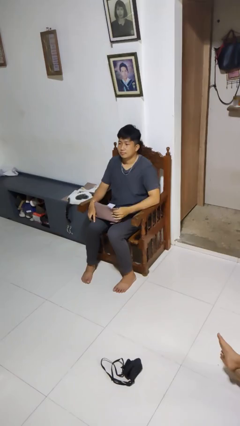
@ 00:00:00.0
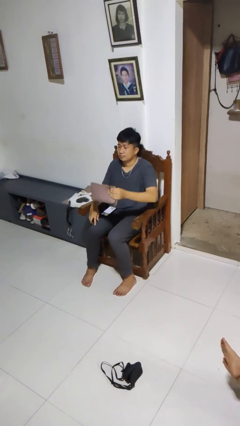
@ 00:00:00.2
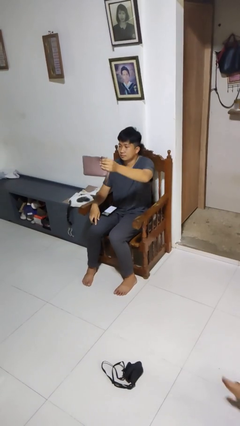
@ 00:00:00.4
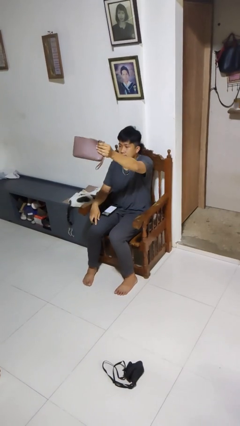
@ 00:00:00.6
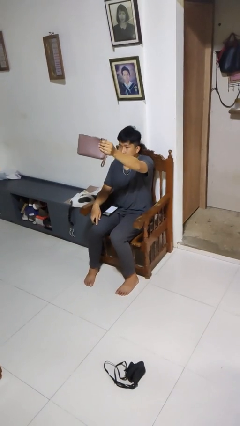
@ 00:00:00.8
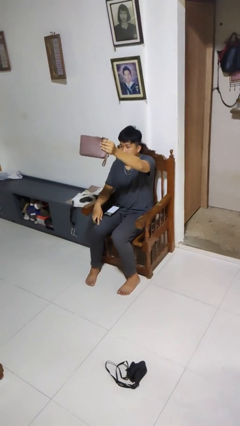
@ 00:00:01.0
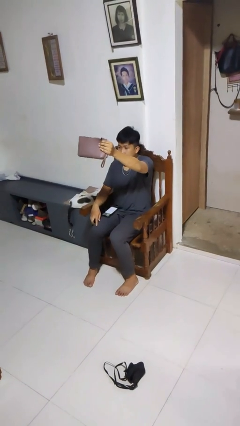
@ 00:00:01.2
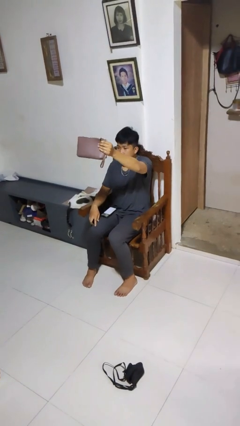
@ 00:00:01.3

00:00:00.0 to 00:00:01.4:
person holds object above head

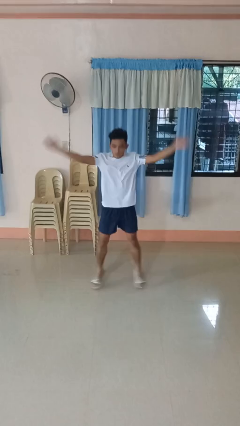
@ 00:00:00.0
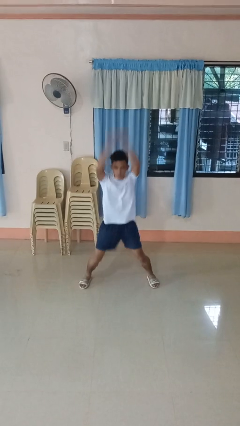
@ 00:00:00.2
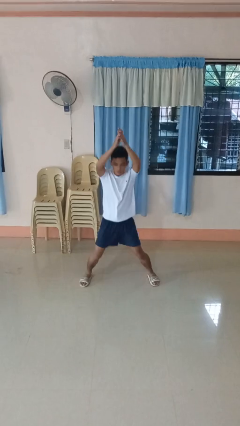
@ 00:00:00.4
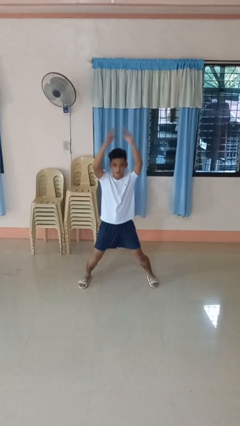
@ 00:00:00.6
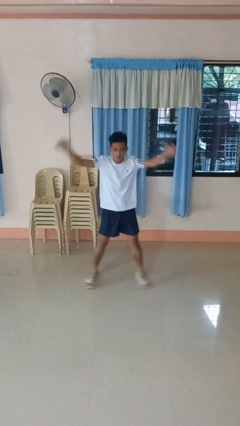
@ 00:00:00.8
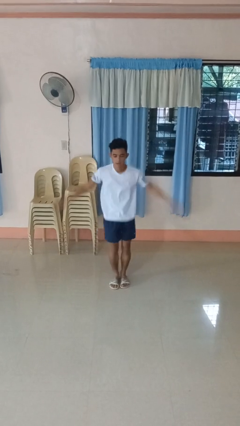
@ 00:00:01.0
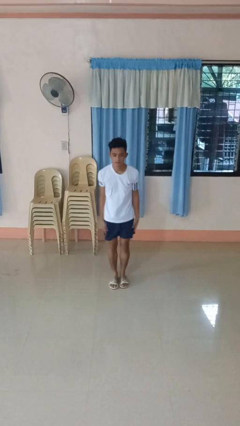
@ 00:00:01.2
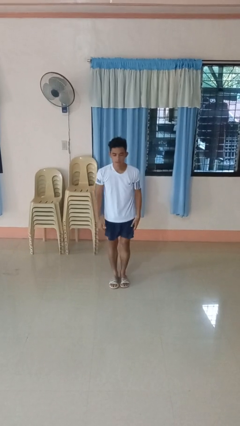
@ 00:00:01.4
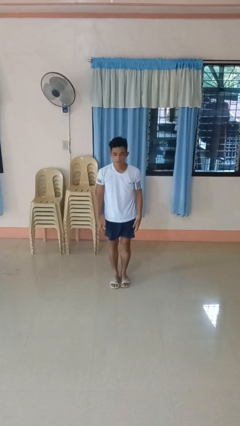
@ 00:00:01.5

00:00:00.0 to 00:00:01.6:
person exercises with jumping jacks

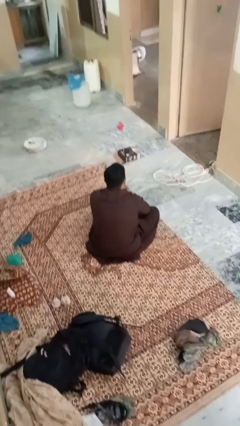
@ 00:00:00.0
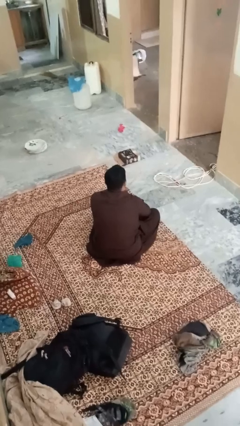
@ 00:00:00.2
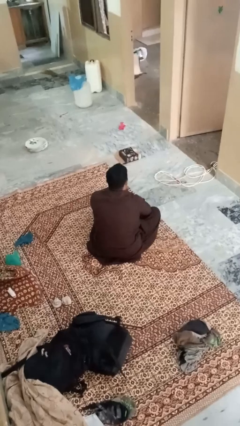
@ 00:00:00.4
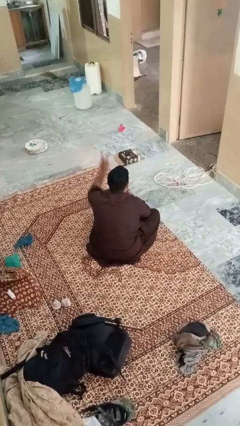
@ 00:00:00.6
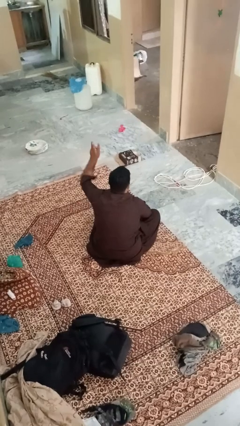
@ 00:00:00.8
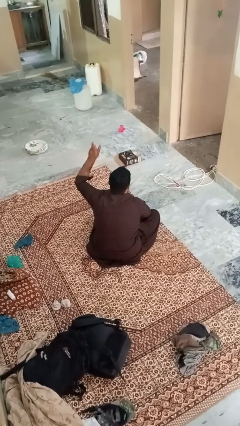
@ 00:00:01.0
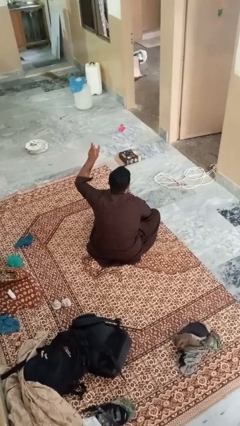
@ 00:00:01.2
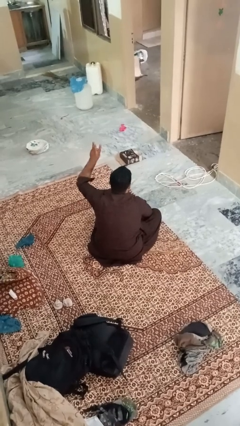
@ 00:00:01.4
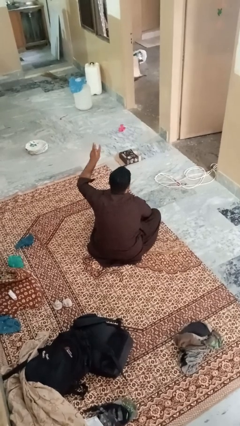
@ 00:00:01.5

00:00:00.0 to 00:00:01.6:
person gestures number three

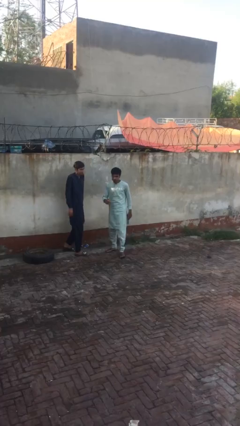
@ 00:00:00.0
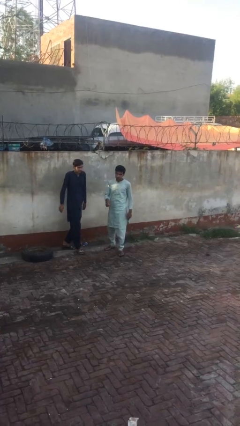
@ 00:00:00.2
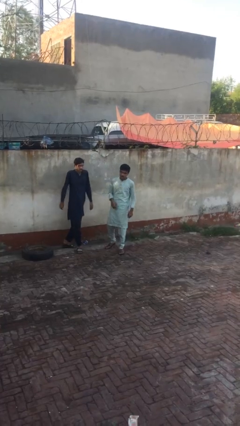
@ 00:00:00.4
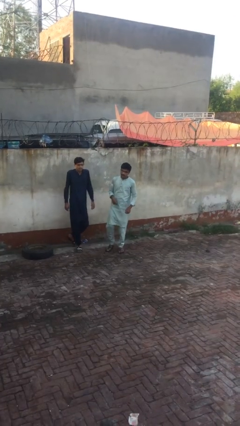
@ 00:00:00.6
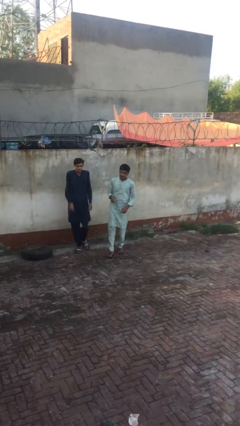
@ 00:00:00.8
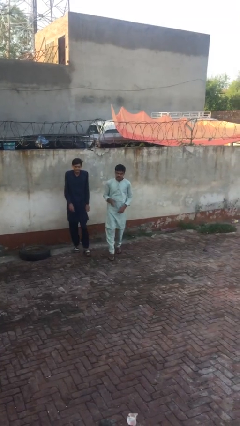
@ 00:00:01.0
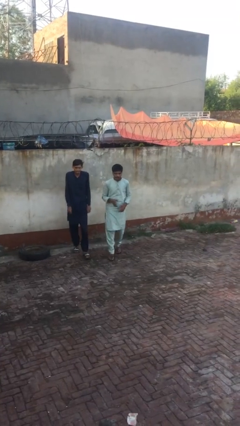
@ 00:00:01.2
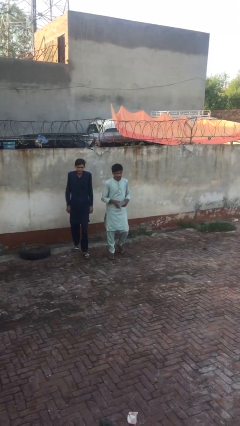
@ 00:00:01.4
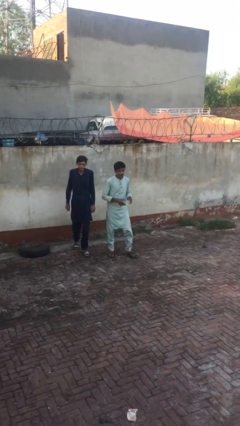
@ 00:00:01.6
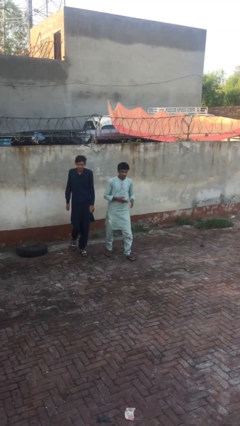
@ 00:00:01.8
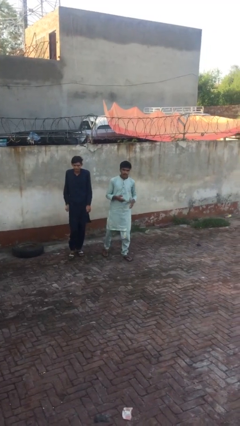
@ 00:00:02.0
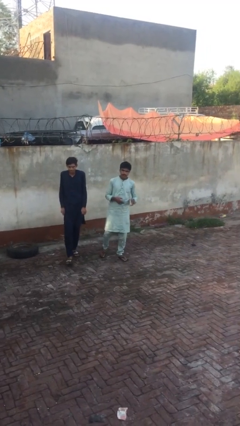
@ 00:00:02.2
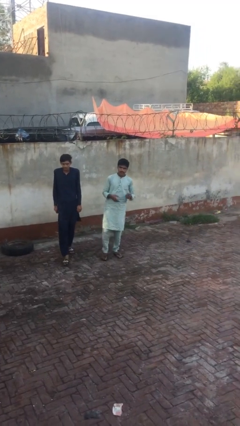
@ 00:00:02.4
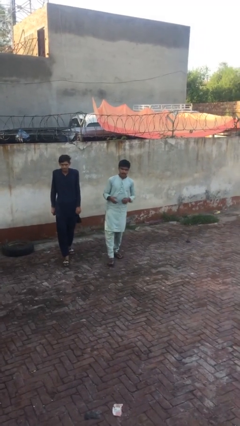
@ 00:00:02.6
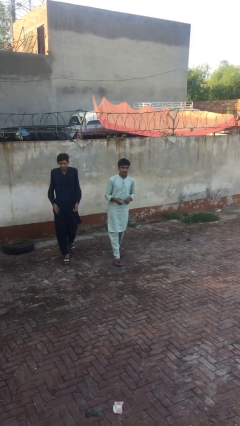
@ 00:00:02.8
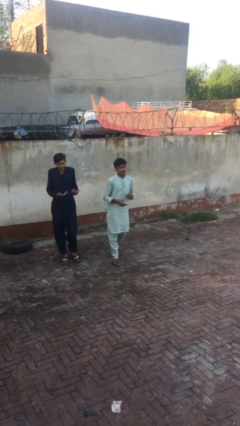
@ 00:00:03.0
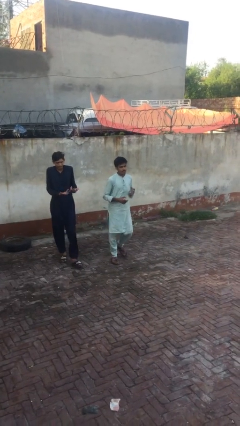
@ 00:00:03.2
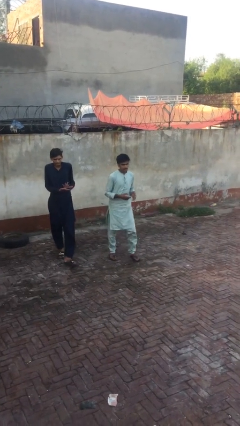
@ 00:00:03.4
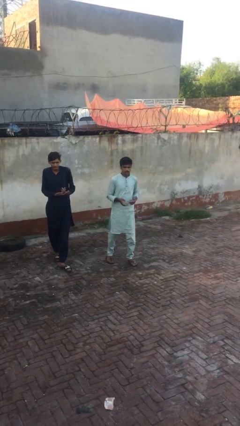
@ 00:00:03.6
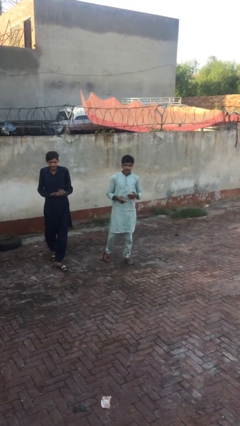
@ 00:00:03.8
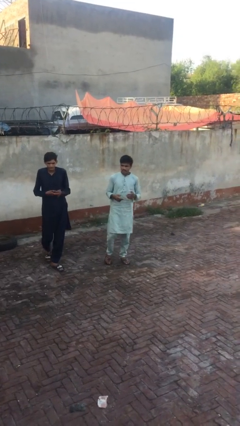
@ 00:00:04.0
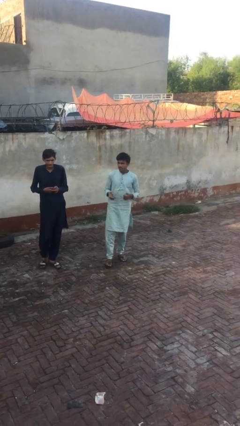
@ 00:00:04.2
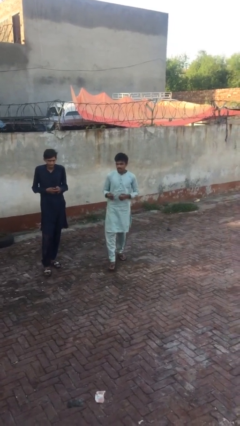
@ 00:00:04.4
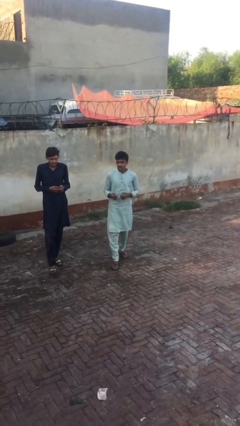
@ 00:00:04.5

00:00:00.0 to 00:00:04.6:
person talks to person

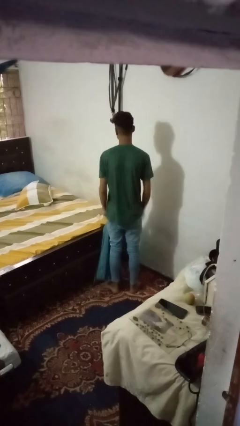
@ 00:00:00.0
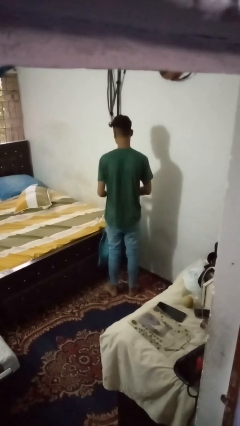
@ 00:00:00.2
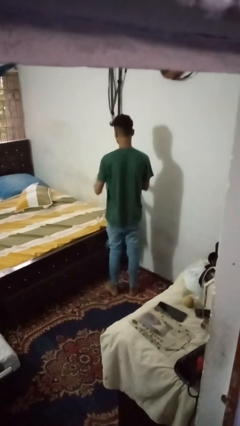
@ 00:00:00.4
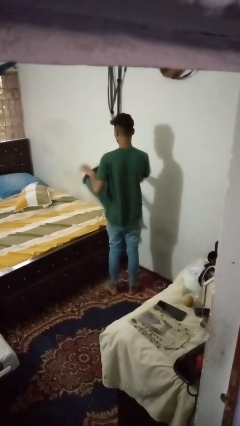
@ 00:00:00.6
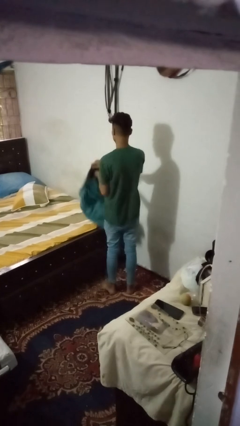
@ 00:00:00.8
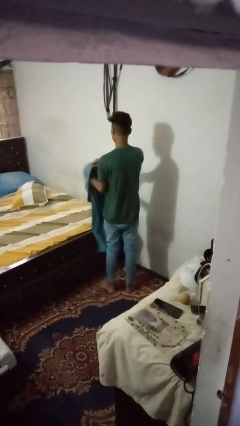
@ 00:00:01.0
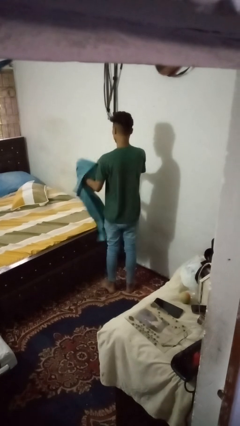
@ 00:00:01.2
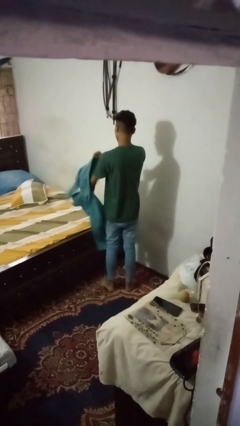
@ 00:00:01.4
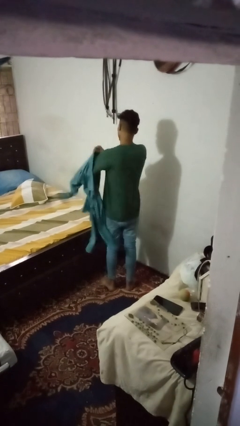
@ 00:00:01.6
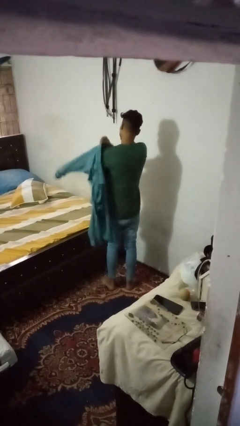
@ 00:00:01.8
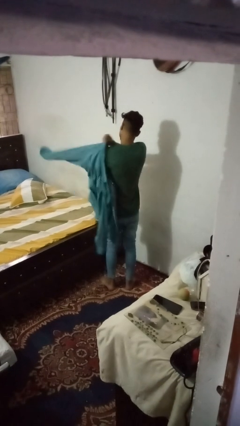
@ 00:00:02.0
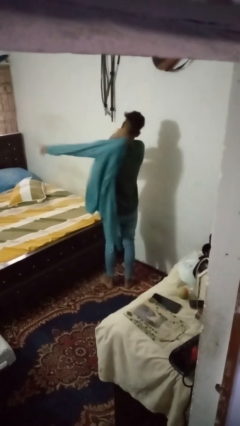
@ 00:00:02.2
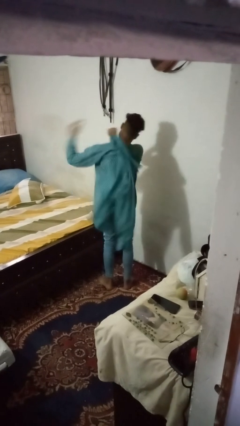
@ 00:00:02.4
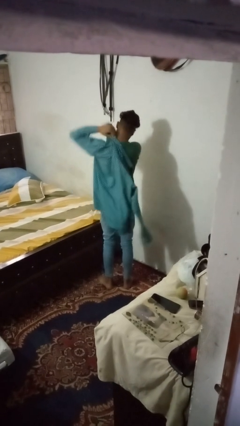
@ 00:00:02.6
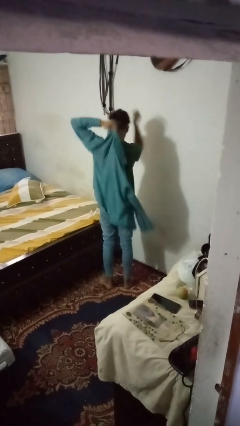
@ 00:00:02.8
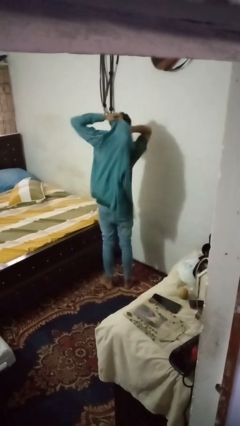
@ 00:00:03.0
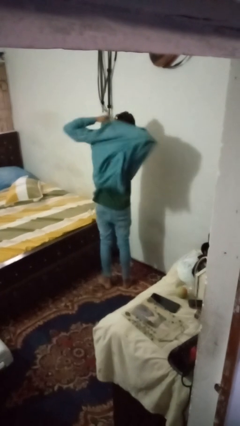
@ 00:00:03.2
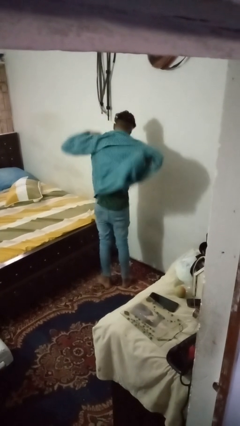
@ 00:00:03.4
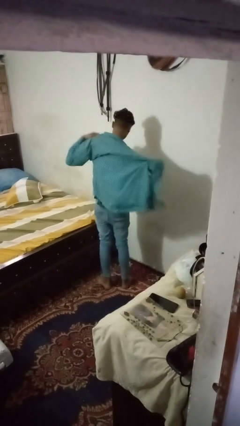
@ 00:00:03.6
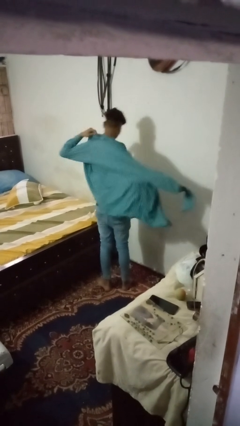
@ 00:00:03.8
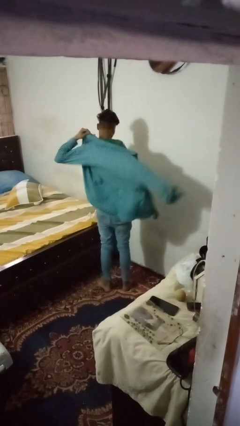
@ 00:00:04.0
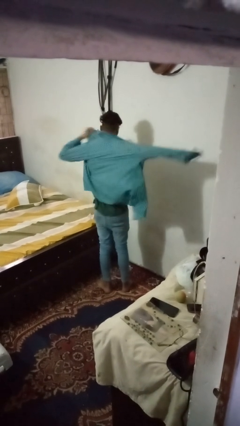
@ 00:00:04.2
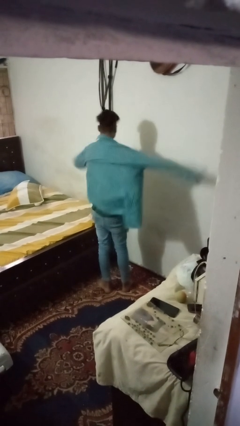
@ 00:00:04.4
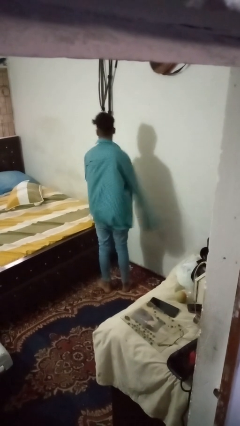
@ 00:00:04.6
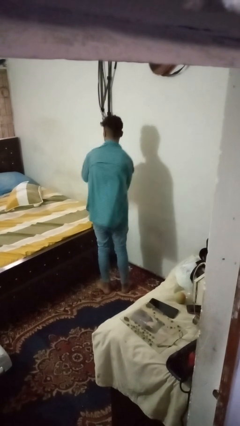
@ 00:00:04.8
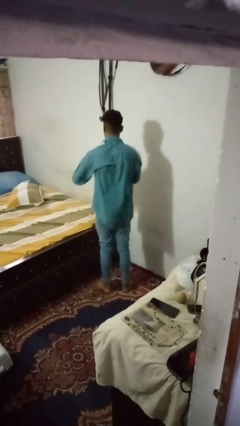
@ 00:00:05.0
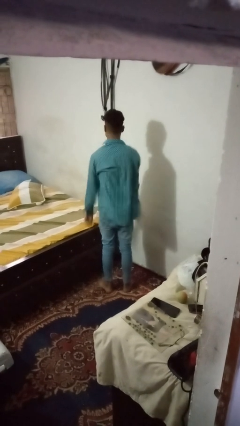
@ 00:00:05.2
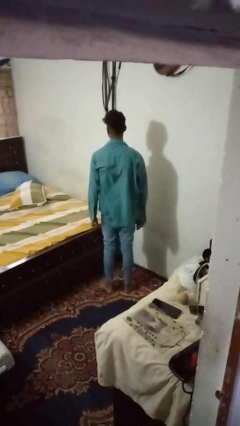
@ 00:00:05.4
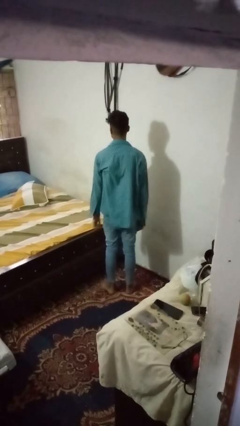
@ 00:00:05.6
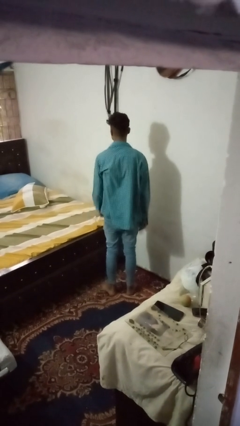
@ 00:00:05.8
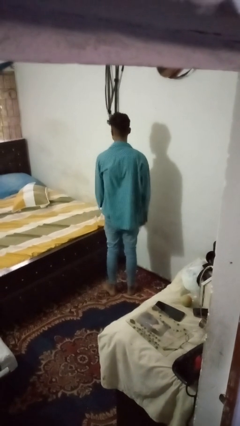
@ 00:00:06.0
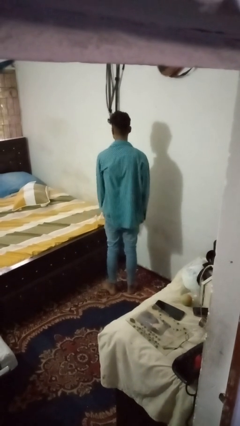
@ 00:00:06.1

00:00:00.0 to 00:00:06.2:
person puts on shirt

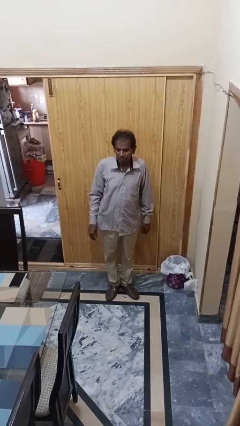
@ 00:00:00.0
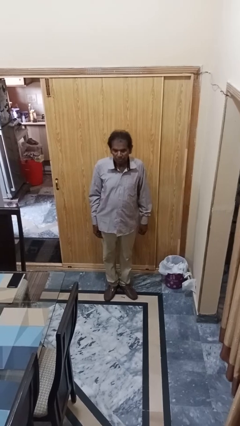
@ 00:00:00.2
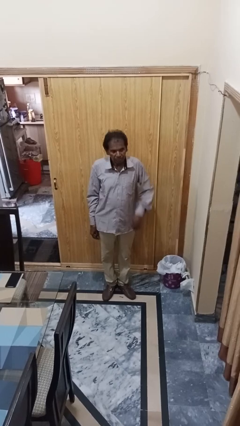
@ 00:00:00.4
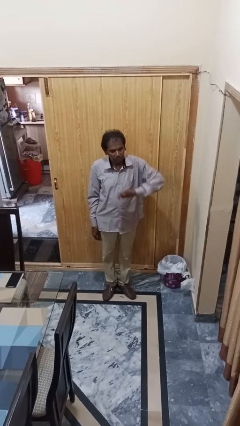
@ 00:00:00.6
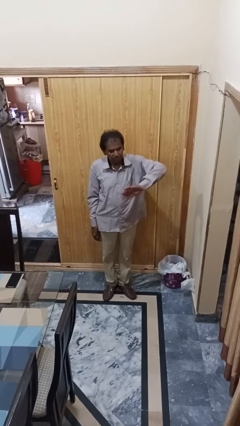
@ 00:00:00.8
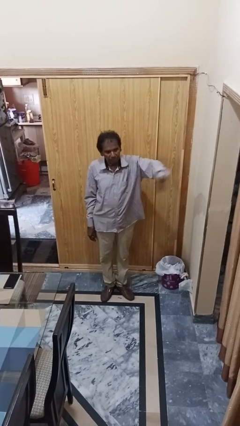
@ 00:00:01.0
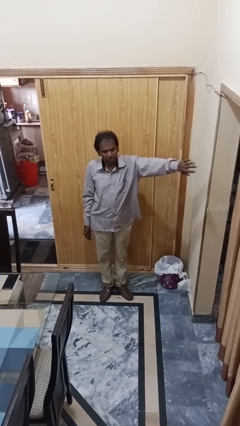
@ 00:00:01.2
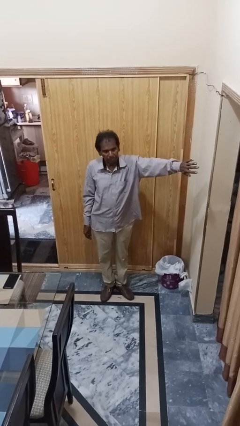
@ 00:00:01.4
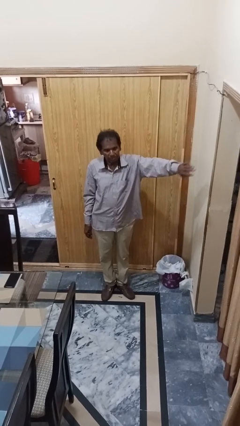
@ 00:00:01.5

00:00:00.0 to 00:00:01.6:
person gestures swipe right
